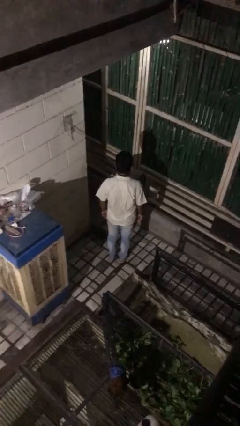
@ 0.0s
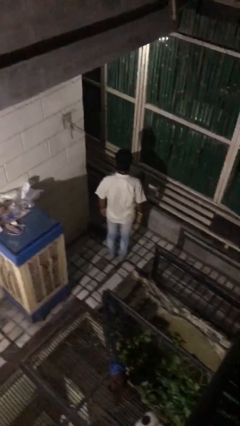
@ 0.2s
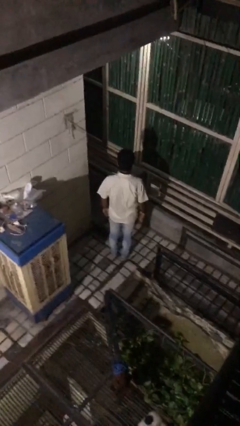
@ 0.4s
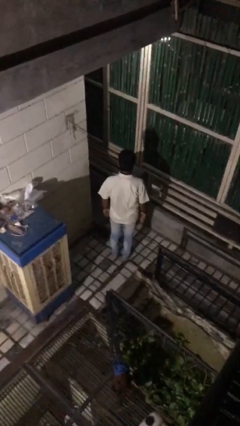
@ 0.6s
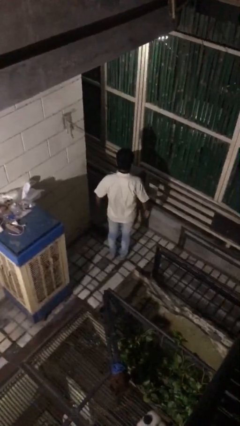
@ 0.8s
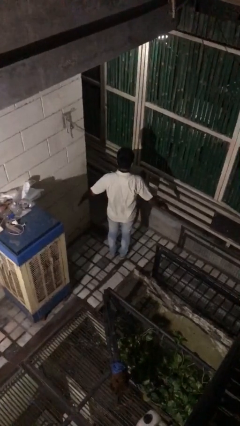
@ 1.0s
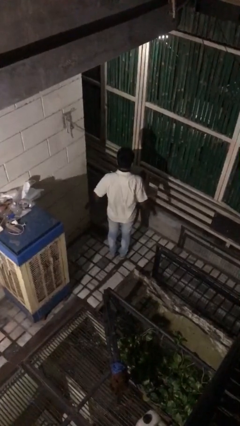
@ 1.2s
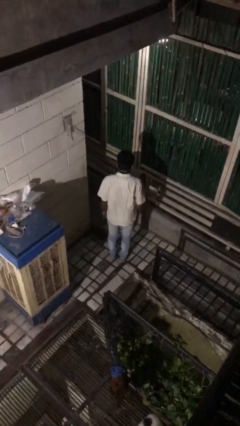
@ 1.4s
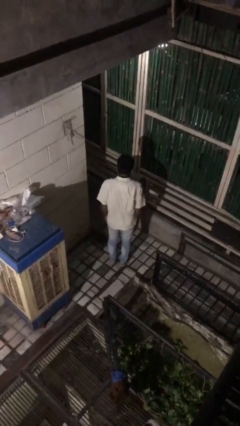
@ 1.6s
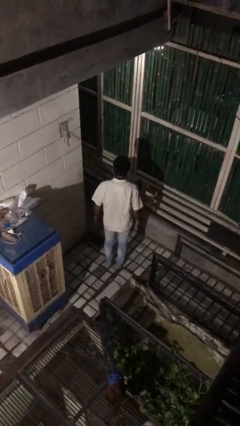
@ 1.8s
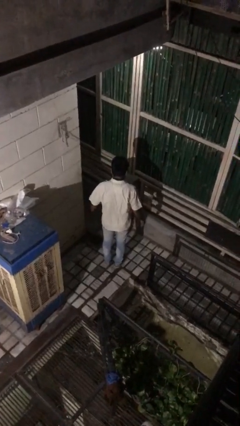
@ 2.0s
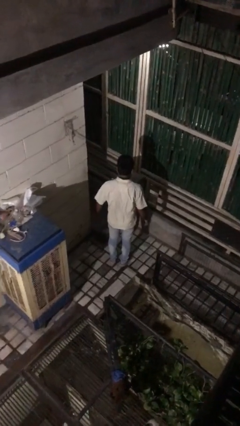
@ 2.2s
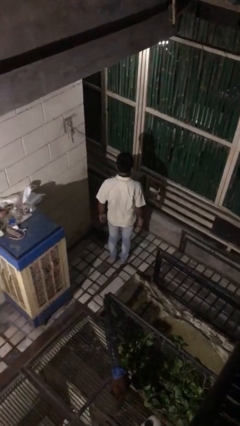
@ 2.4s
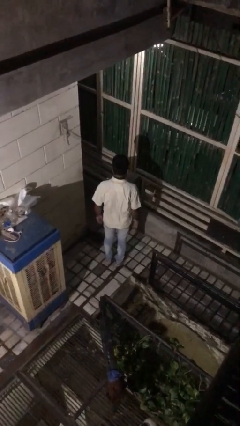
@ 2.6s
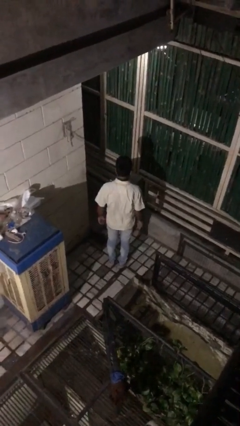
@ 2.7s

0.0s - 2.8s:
person slaps hands on thighs

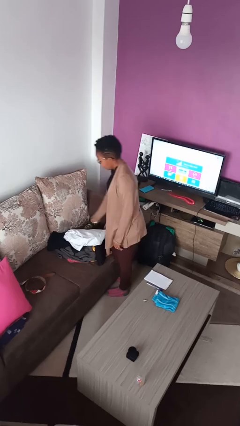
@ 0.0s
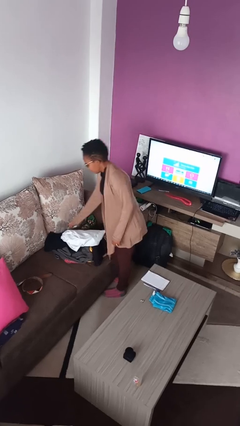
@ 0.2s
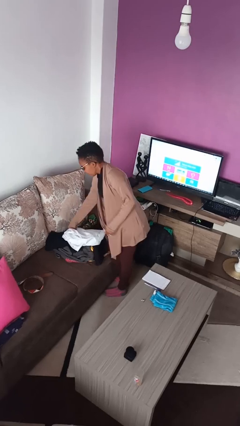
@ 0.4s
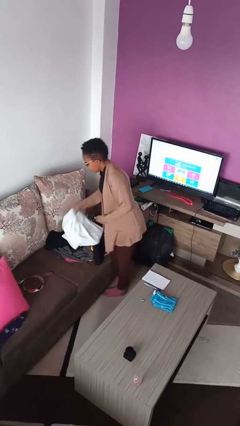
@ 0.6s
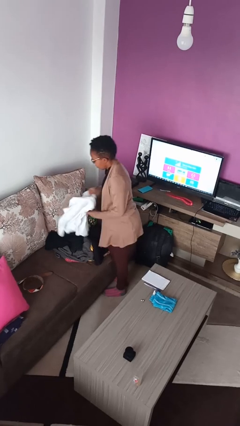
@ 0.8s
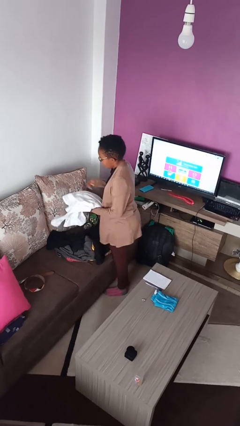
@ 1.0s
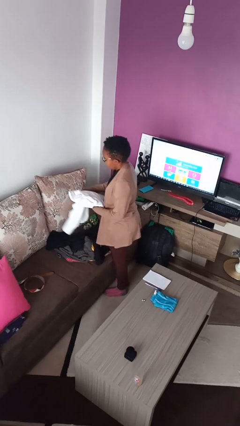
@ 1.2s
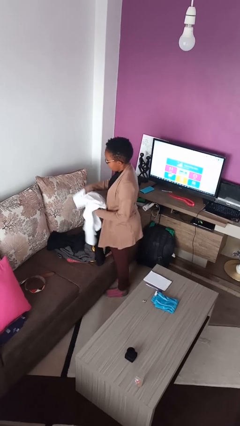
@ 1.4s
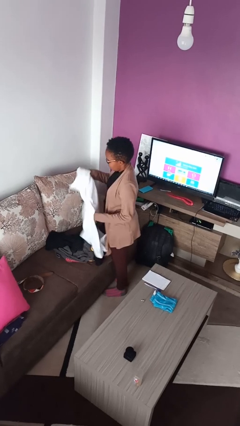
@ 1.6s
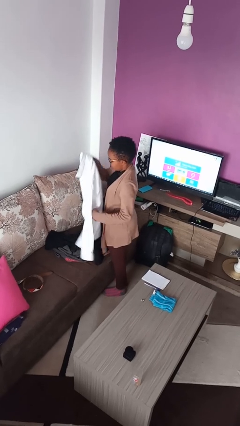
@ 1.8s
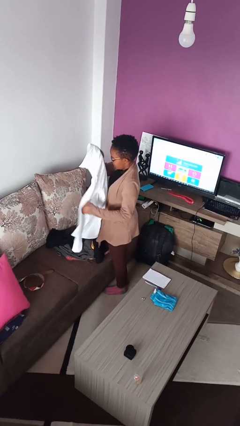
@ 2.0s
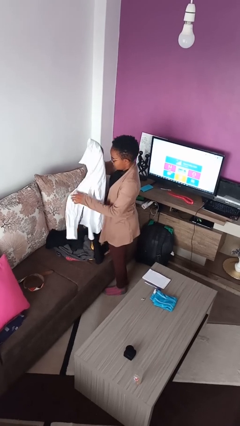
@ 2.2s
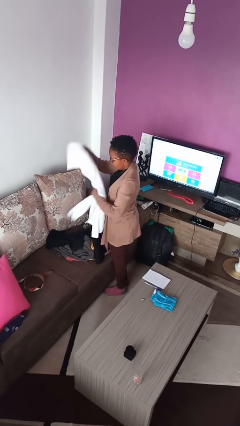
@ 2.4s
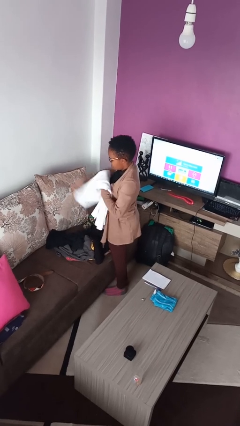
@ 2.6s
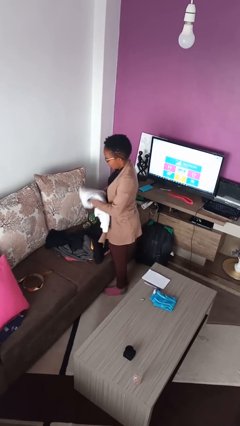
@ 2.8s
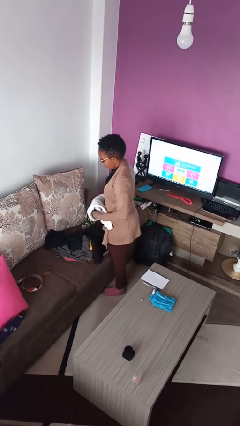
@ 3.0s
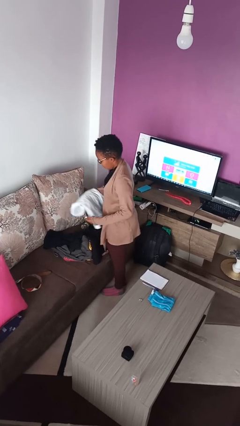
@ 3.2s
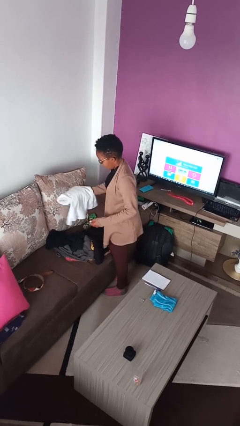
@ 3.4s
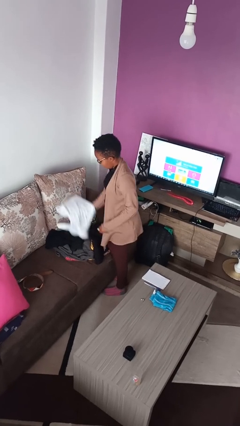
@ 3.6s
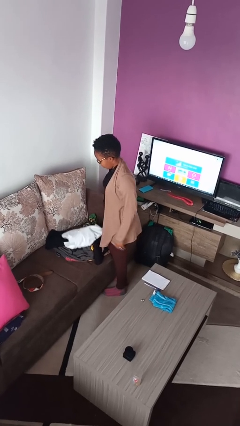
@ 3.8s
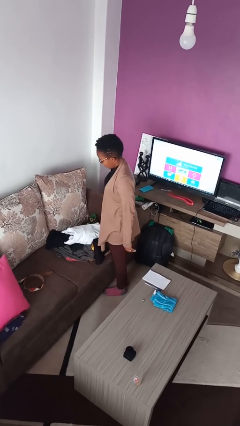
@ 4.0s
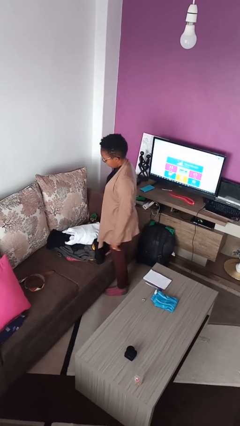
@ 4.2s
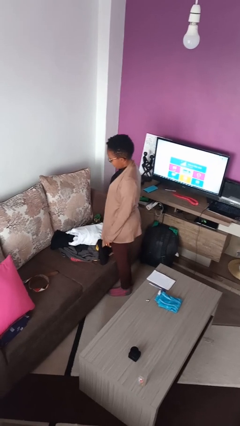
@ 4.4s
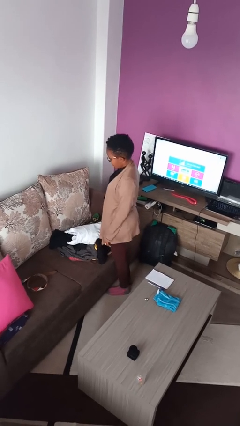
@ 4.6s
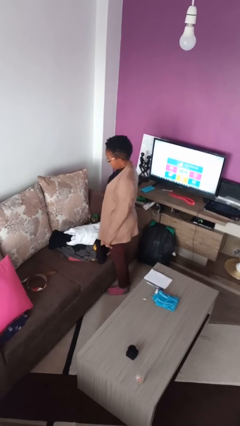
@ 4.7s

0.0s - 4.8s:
person folds shirt

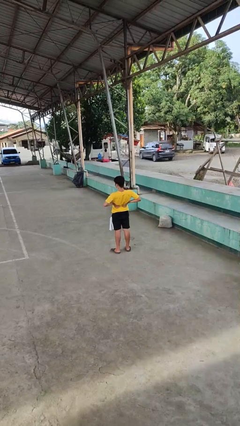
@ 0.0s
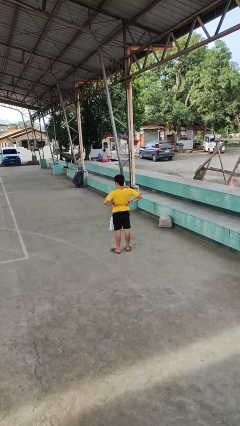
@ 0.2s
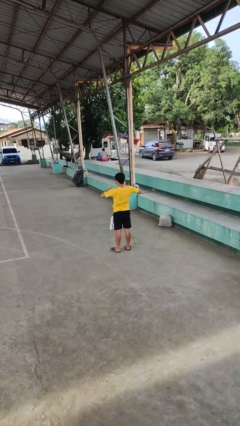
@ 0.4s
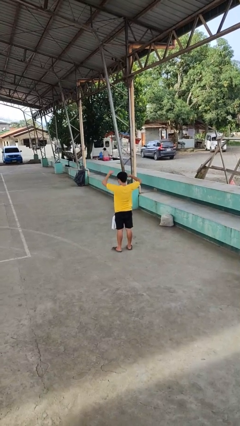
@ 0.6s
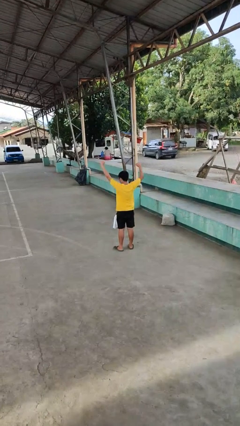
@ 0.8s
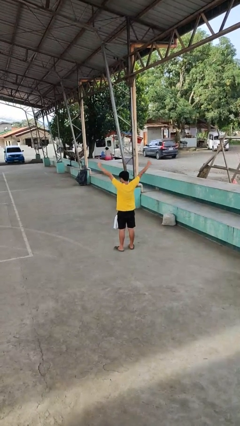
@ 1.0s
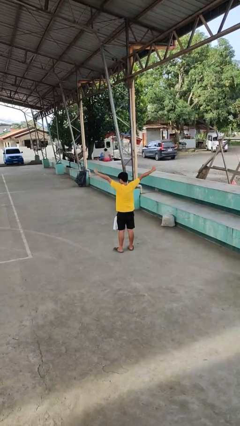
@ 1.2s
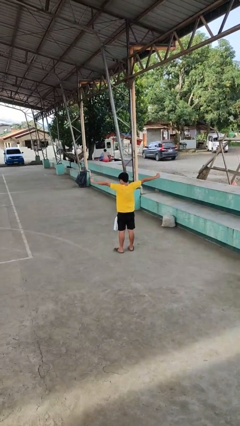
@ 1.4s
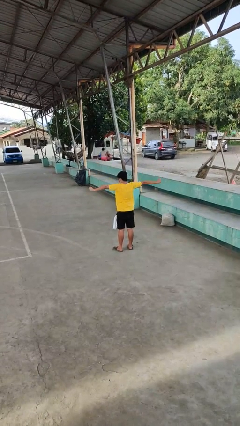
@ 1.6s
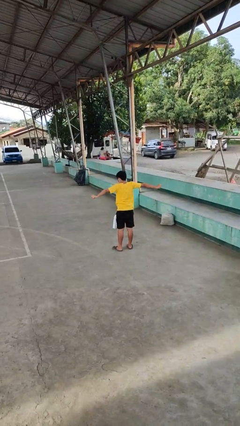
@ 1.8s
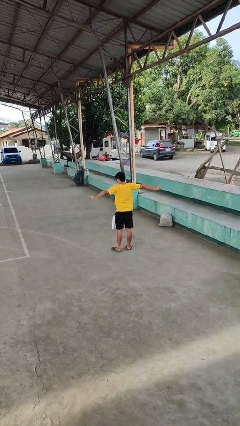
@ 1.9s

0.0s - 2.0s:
person stretches arms to side

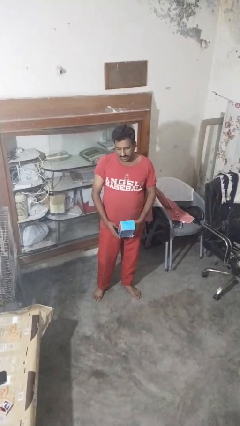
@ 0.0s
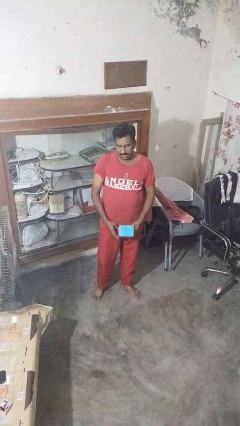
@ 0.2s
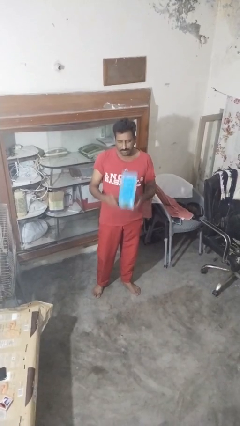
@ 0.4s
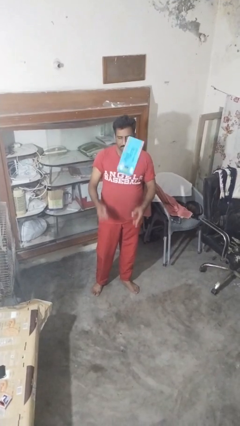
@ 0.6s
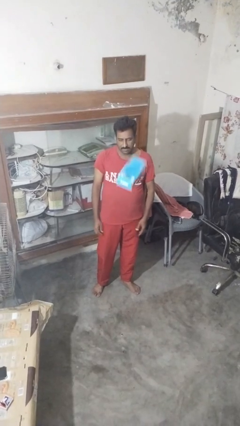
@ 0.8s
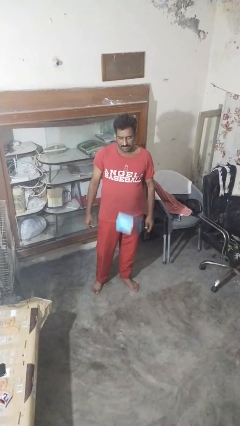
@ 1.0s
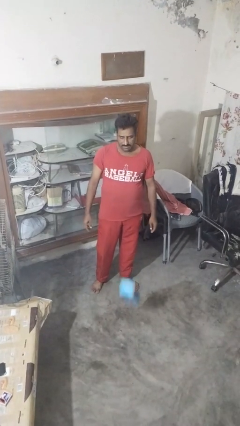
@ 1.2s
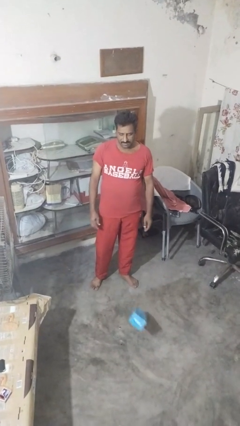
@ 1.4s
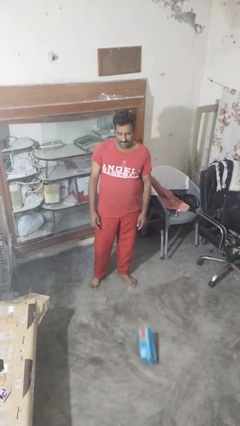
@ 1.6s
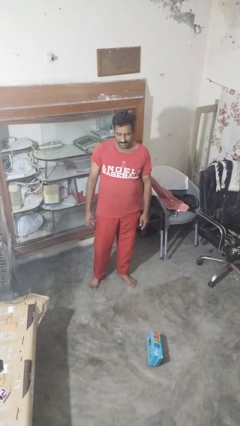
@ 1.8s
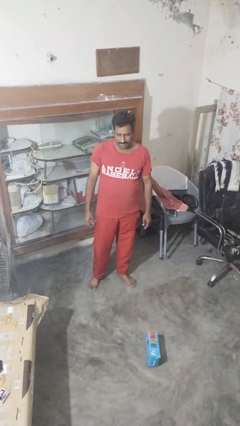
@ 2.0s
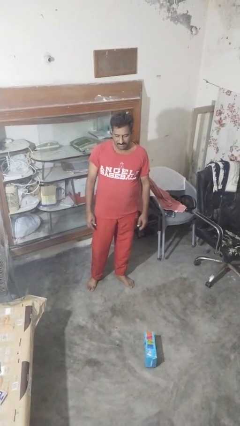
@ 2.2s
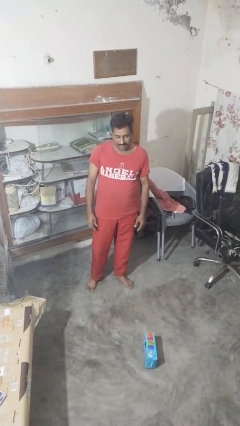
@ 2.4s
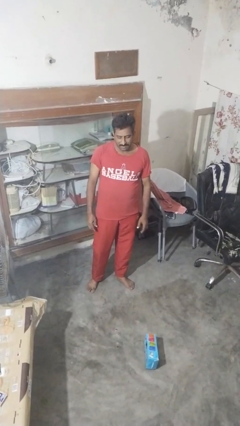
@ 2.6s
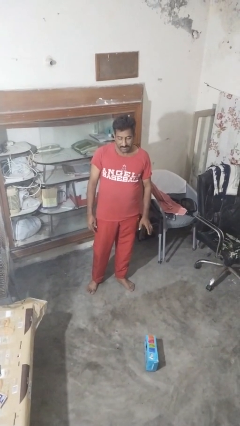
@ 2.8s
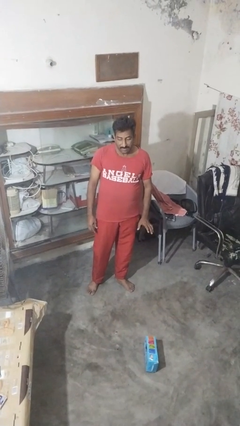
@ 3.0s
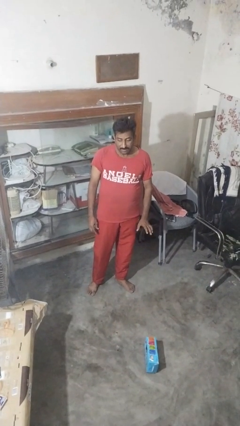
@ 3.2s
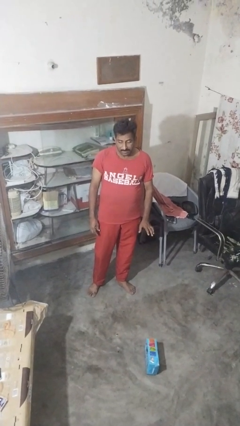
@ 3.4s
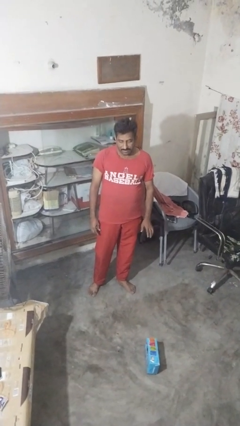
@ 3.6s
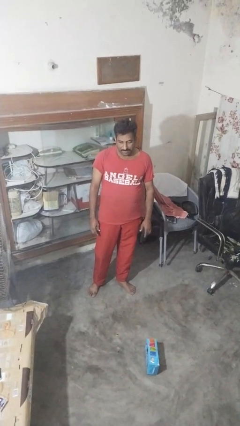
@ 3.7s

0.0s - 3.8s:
person throws object into air

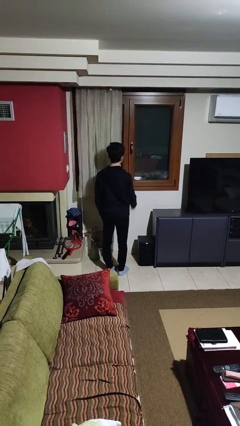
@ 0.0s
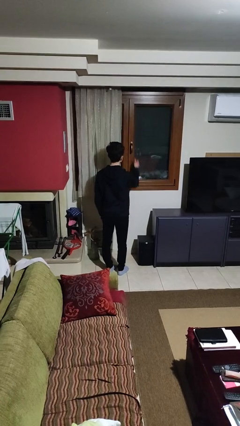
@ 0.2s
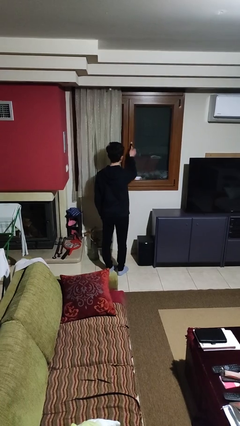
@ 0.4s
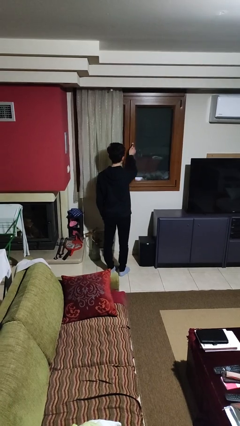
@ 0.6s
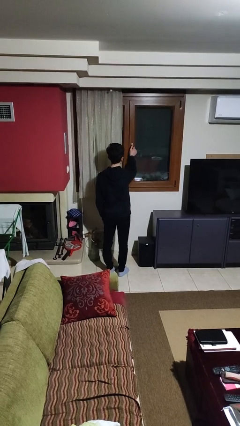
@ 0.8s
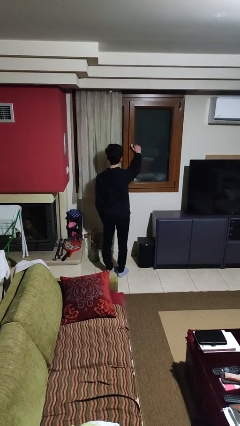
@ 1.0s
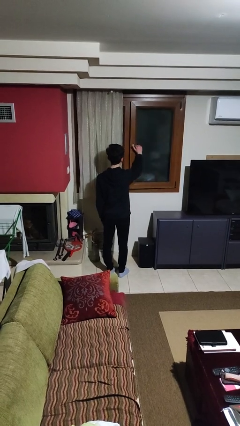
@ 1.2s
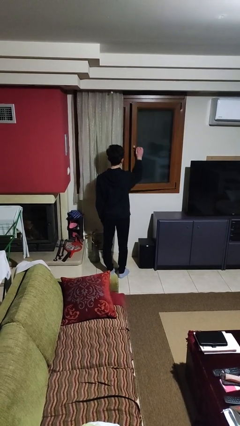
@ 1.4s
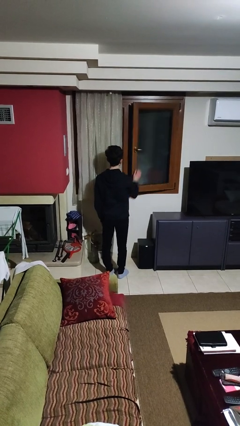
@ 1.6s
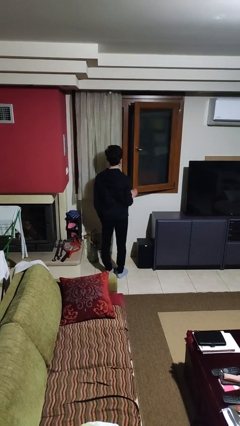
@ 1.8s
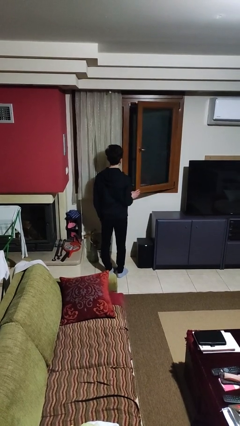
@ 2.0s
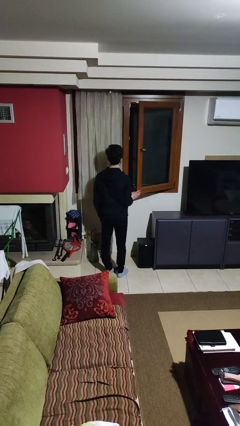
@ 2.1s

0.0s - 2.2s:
person opens home window

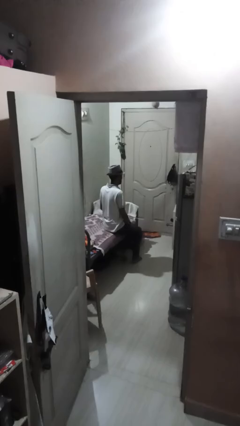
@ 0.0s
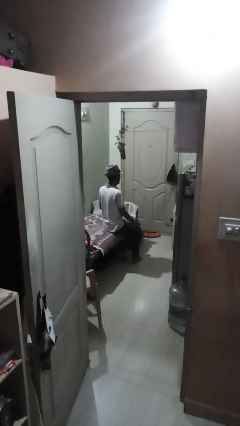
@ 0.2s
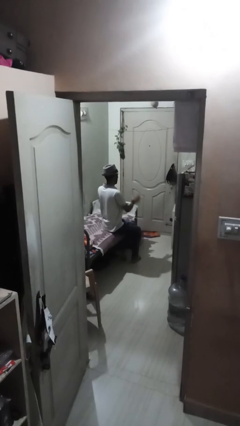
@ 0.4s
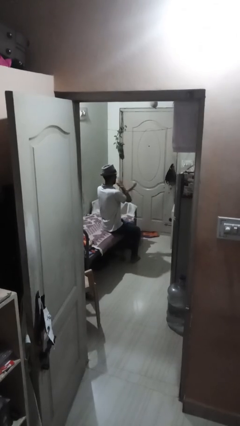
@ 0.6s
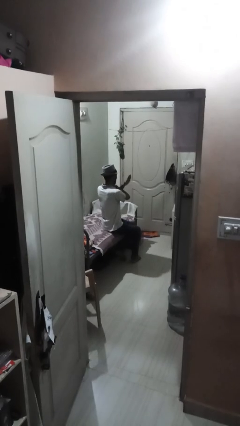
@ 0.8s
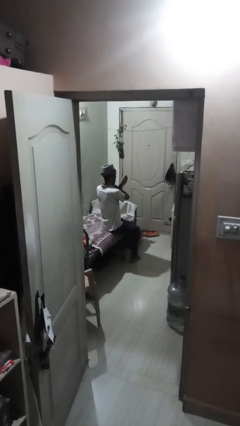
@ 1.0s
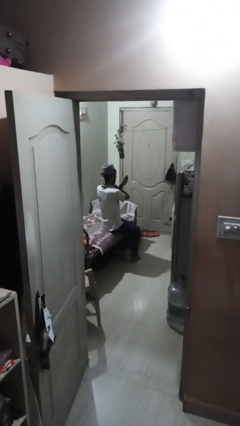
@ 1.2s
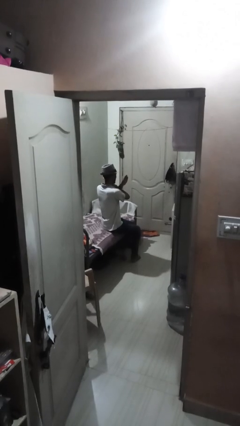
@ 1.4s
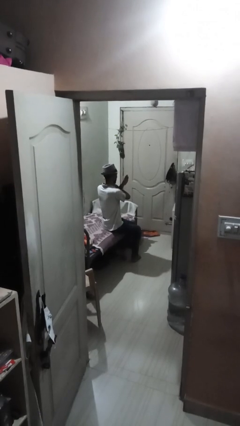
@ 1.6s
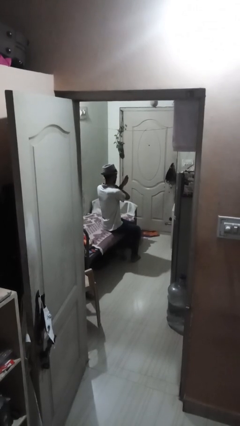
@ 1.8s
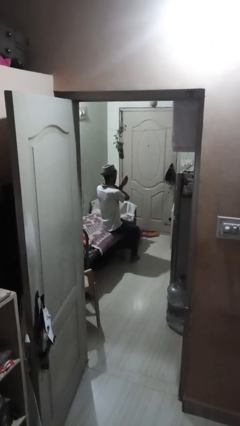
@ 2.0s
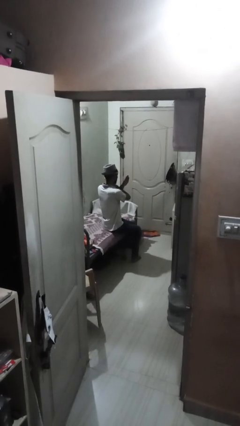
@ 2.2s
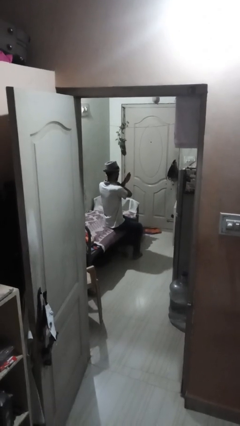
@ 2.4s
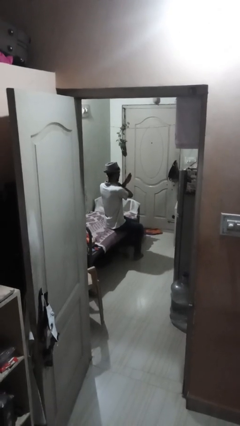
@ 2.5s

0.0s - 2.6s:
person gestures arms x
